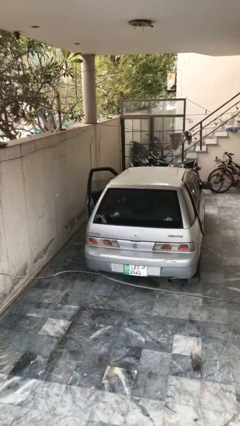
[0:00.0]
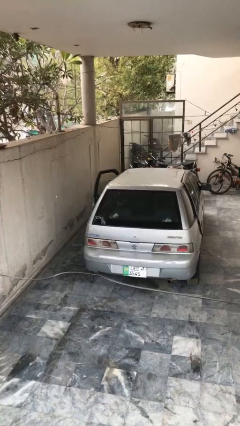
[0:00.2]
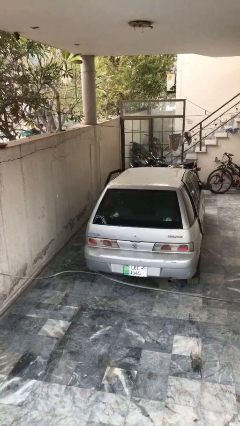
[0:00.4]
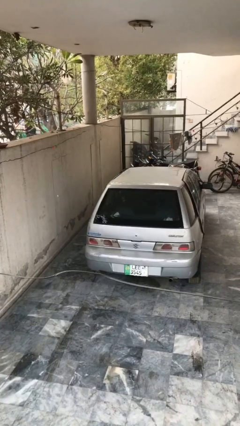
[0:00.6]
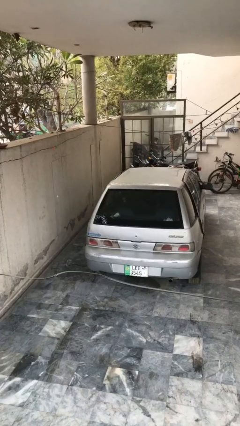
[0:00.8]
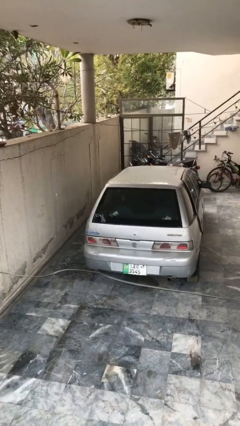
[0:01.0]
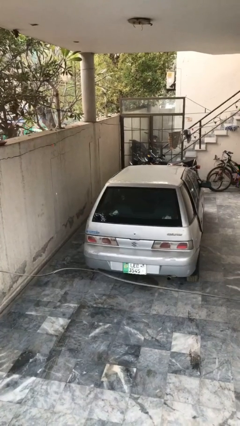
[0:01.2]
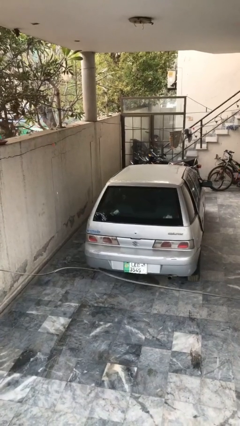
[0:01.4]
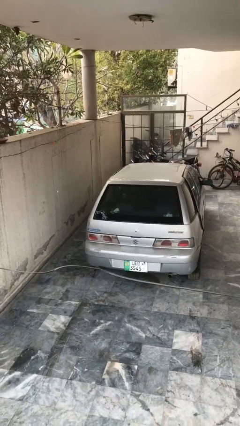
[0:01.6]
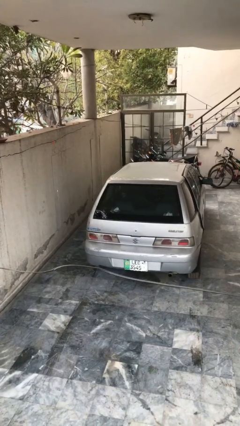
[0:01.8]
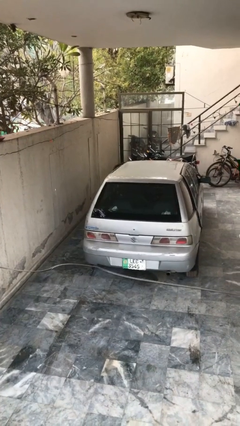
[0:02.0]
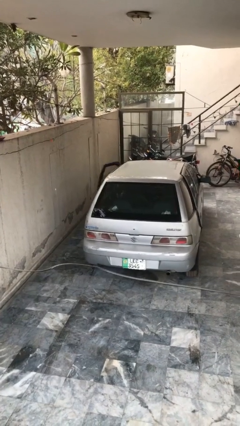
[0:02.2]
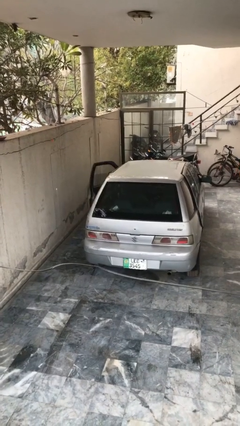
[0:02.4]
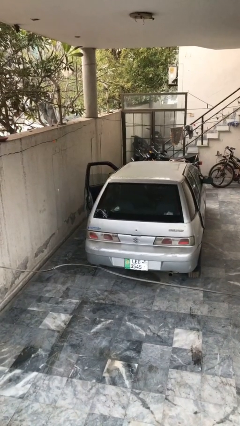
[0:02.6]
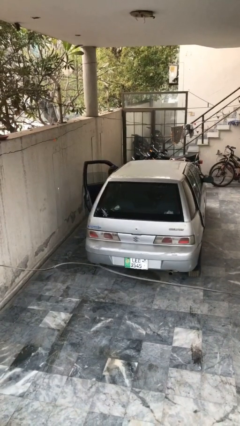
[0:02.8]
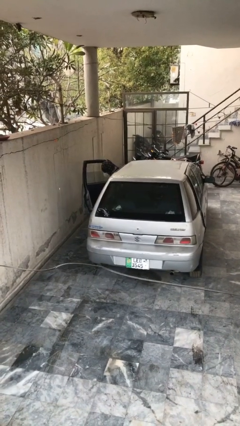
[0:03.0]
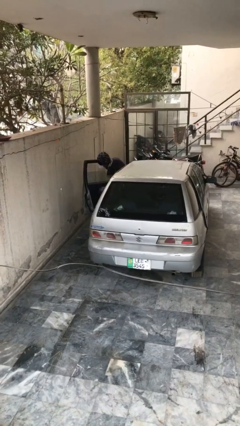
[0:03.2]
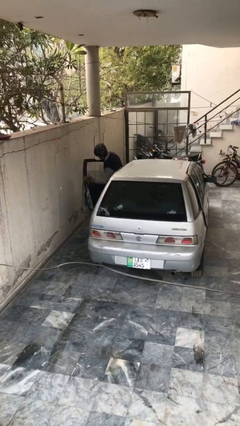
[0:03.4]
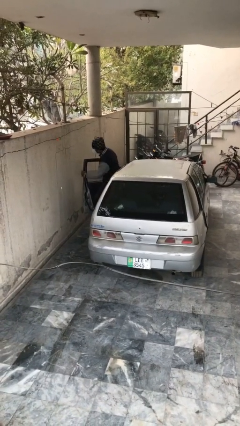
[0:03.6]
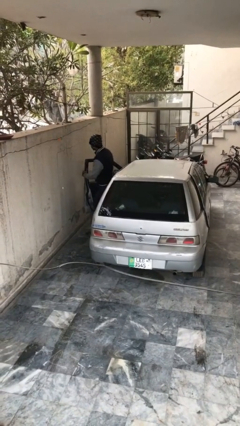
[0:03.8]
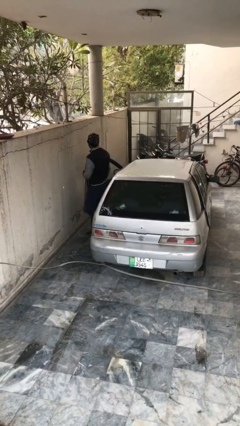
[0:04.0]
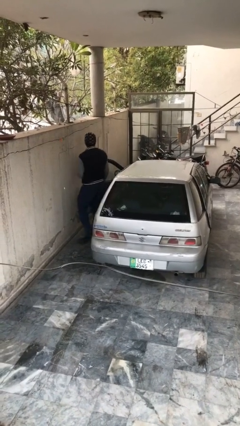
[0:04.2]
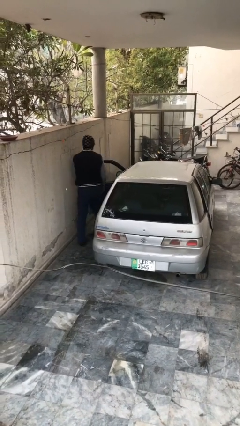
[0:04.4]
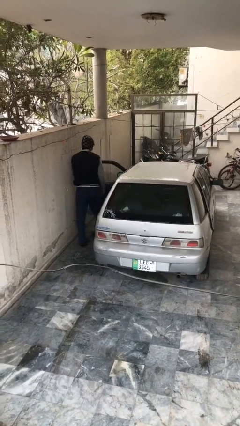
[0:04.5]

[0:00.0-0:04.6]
car drops off person

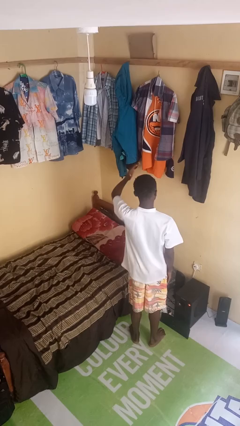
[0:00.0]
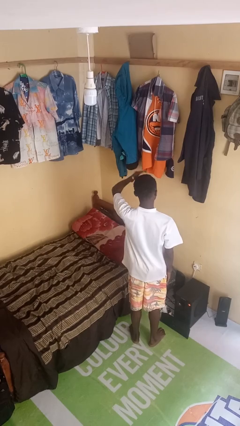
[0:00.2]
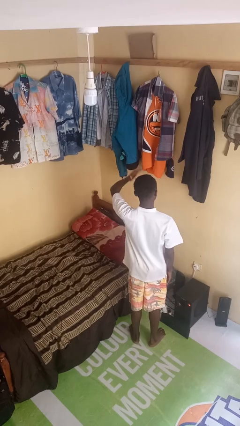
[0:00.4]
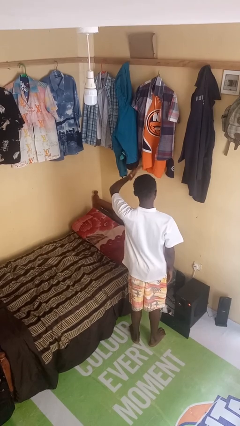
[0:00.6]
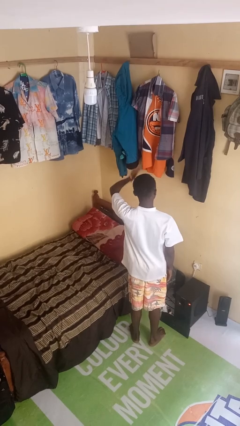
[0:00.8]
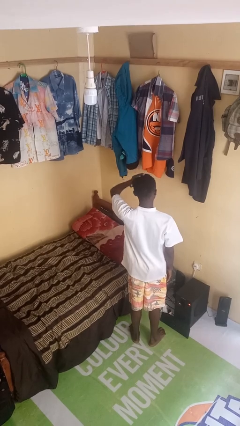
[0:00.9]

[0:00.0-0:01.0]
person pats head

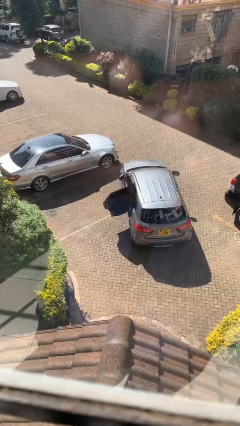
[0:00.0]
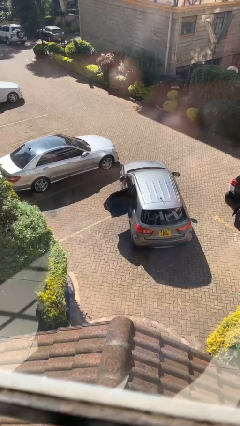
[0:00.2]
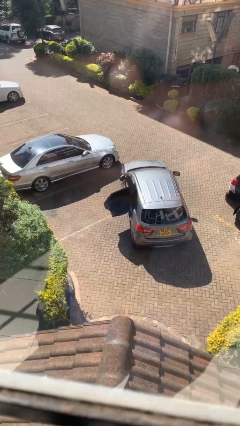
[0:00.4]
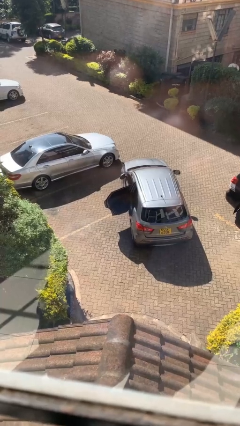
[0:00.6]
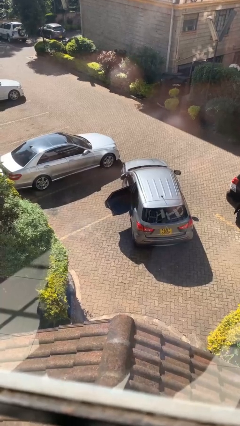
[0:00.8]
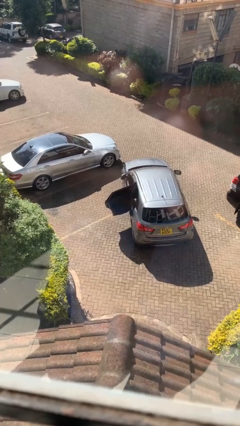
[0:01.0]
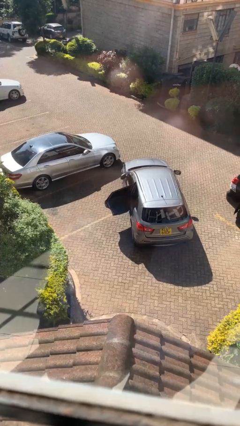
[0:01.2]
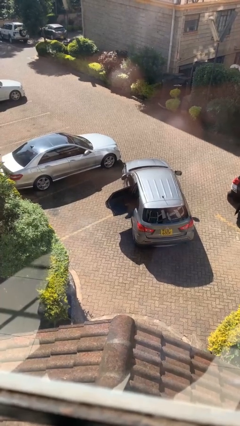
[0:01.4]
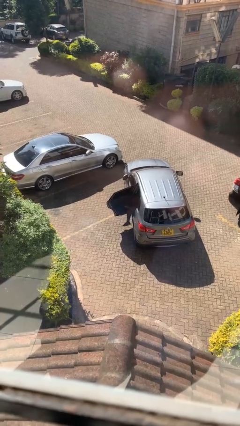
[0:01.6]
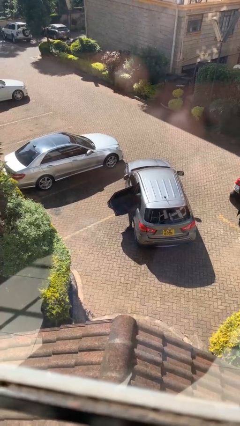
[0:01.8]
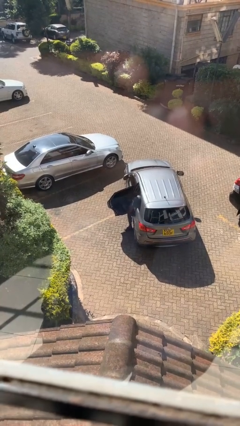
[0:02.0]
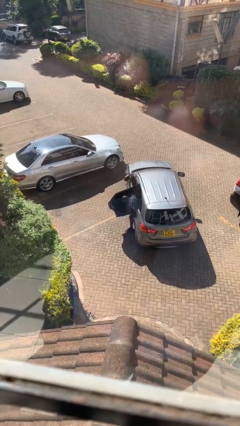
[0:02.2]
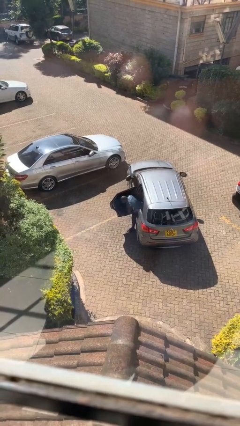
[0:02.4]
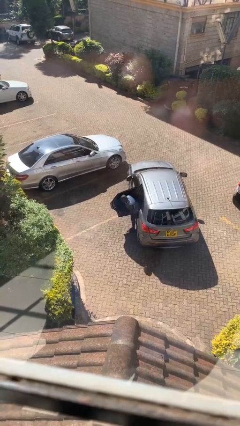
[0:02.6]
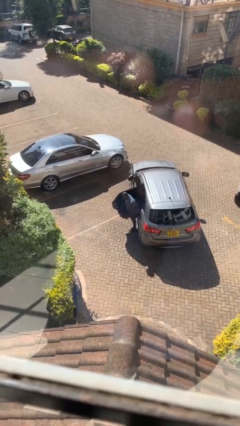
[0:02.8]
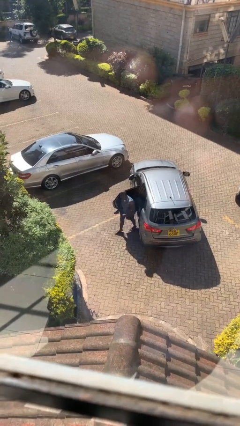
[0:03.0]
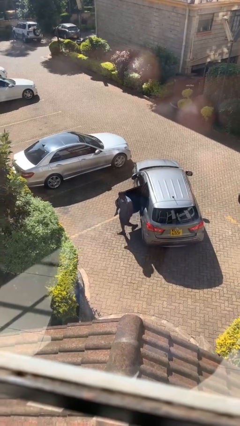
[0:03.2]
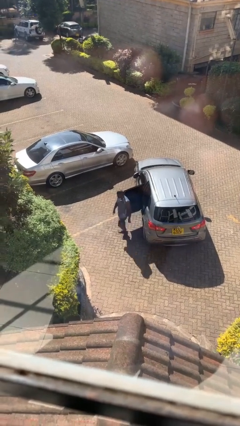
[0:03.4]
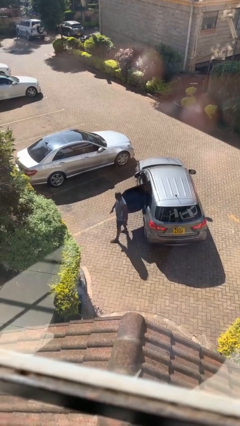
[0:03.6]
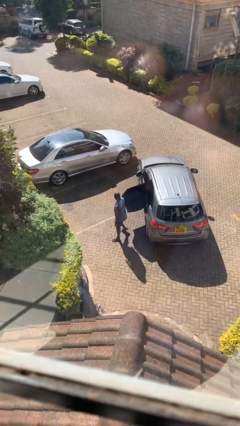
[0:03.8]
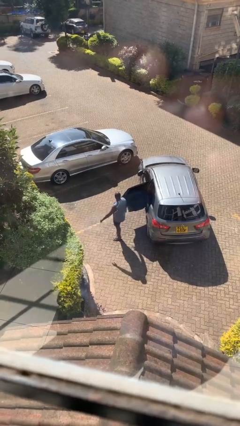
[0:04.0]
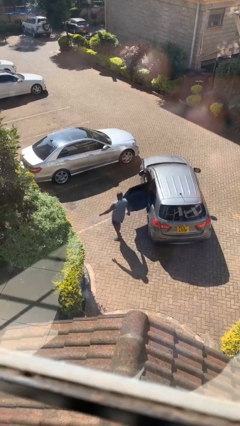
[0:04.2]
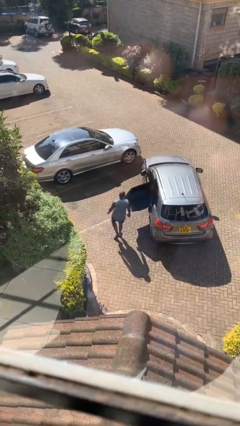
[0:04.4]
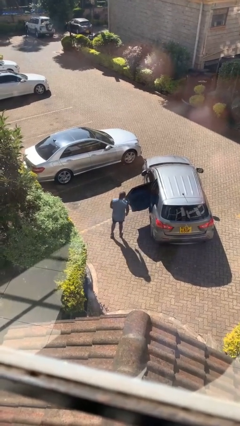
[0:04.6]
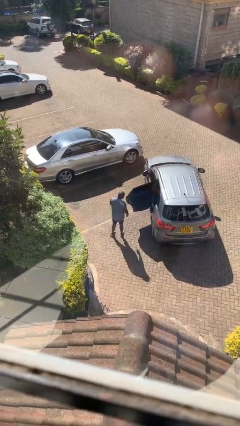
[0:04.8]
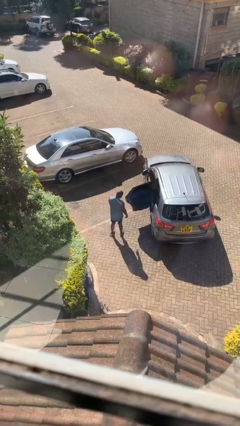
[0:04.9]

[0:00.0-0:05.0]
person exits car

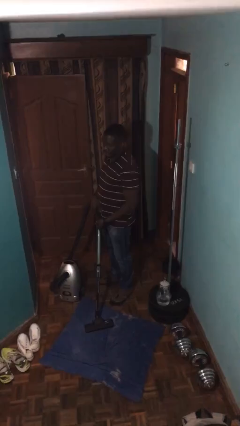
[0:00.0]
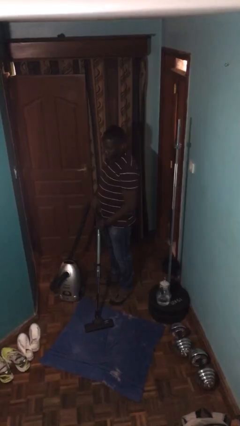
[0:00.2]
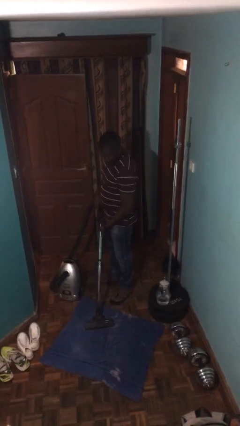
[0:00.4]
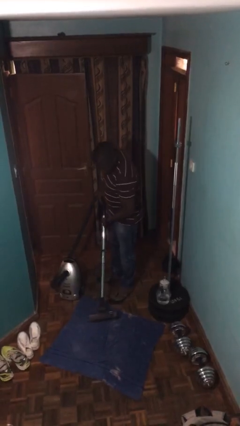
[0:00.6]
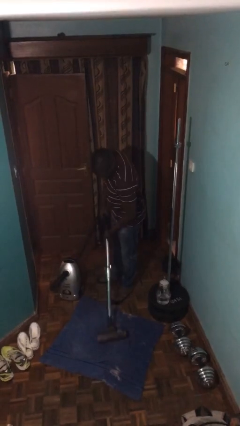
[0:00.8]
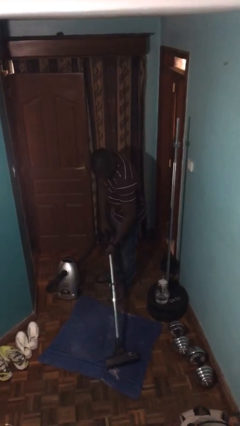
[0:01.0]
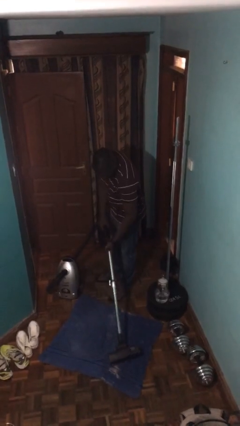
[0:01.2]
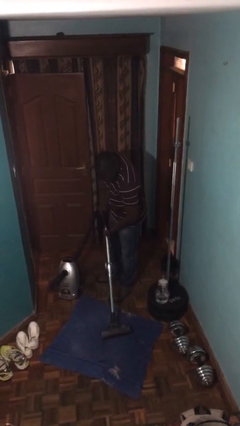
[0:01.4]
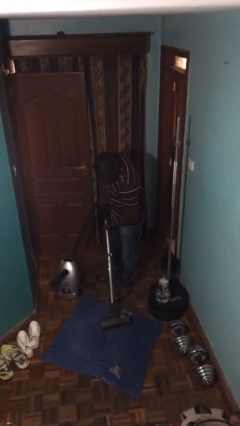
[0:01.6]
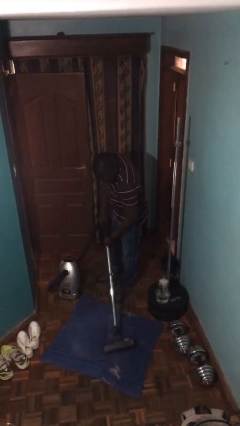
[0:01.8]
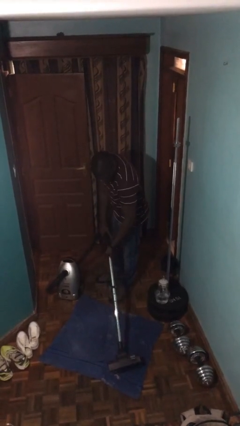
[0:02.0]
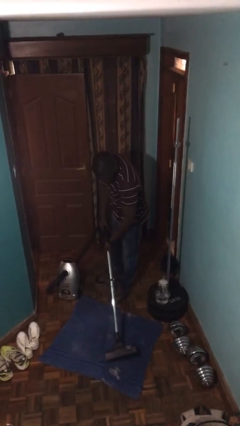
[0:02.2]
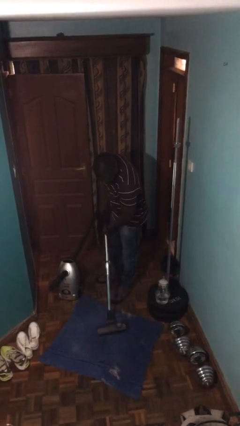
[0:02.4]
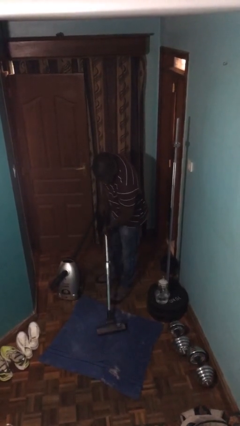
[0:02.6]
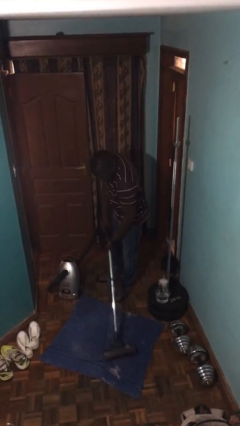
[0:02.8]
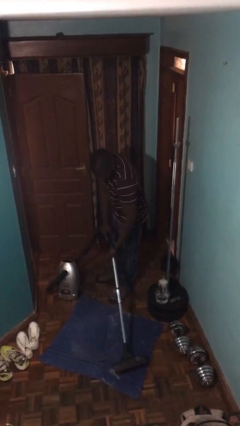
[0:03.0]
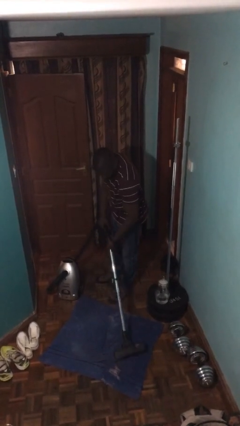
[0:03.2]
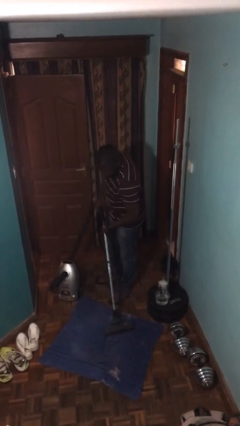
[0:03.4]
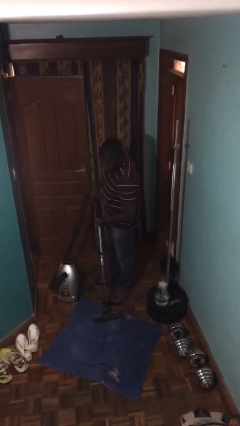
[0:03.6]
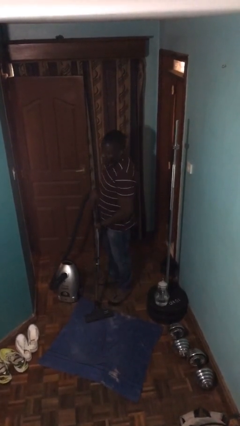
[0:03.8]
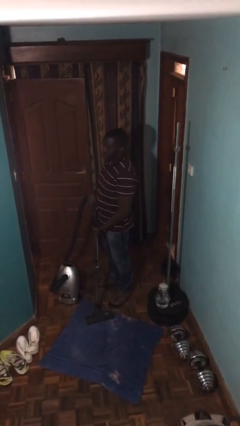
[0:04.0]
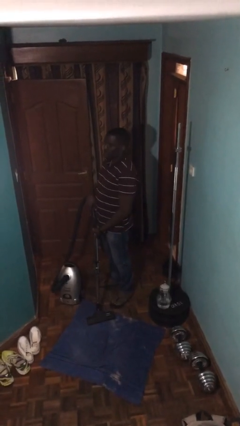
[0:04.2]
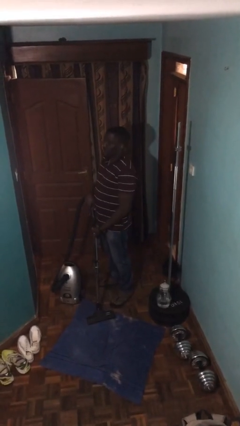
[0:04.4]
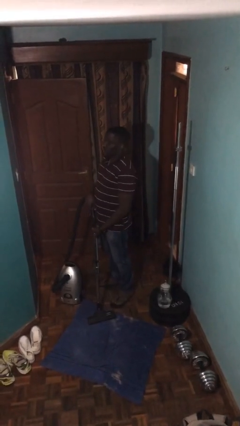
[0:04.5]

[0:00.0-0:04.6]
person vacuums carpet

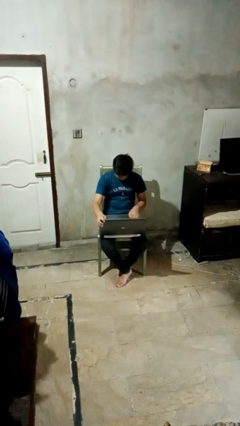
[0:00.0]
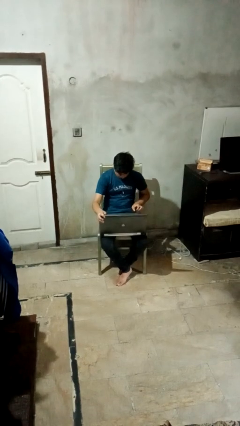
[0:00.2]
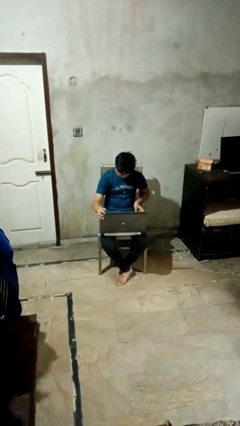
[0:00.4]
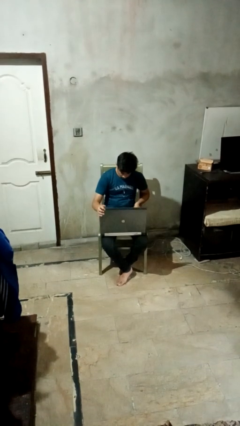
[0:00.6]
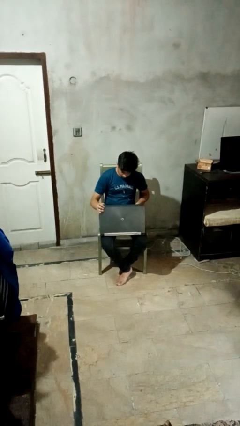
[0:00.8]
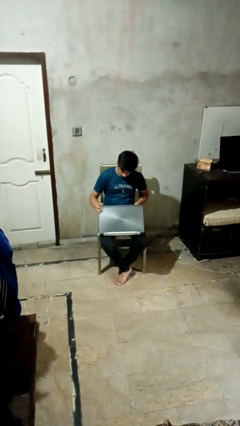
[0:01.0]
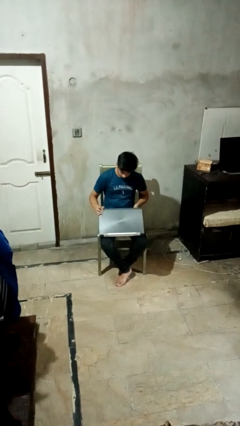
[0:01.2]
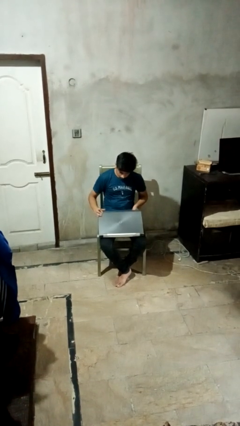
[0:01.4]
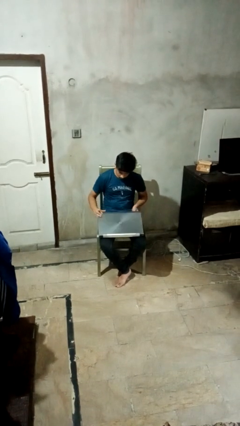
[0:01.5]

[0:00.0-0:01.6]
person closes laptop

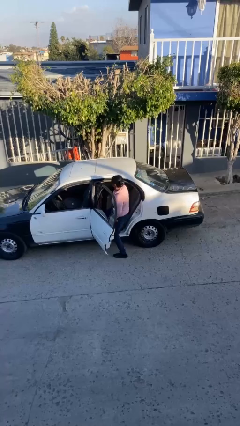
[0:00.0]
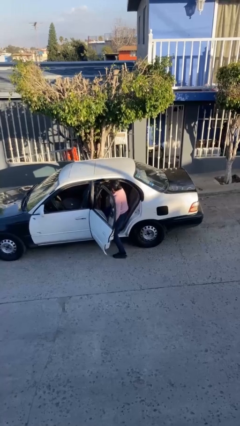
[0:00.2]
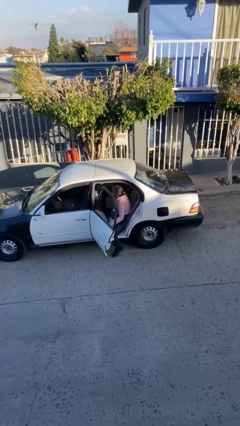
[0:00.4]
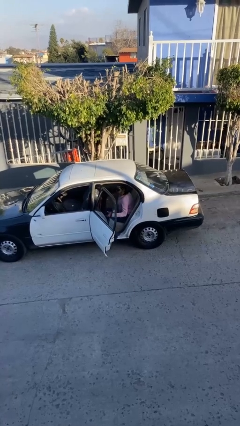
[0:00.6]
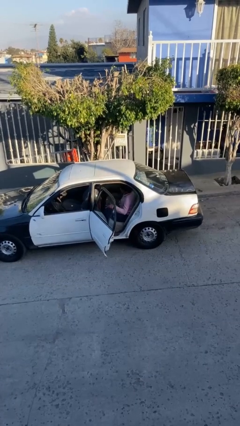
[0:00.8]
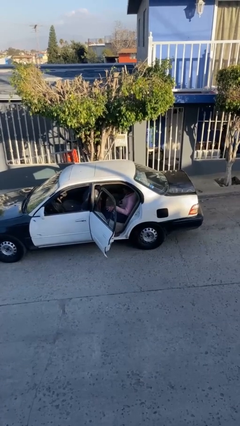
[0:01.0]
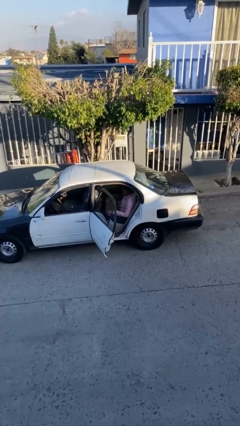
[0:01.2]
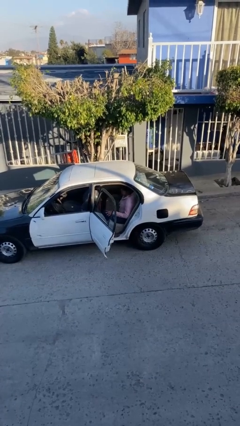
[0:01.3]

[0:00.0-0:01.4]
person enters car
